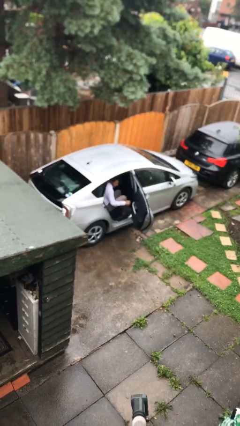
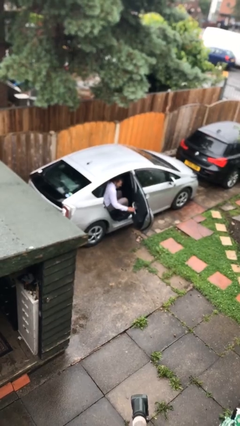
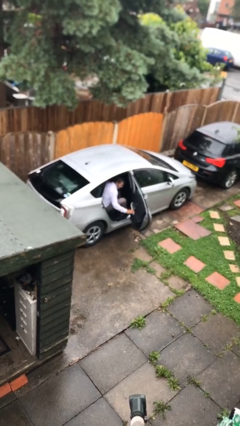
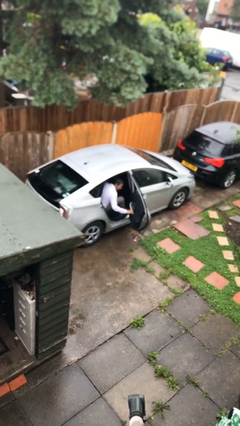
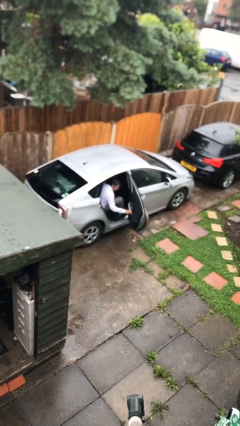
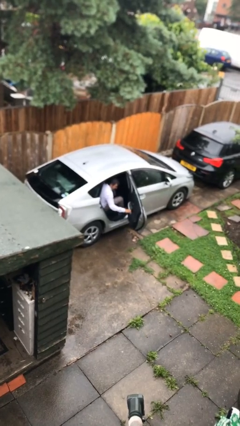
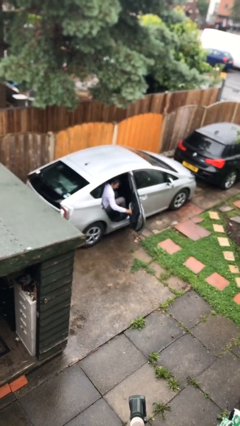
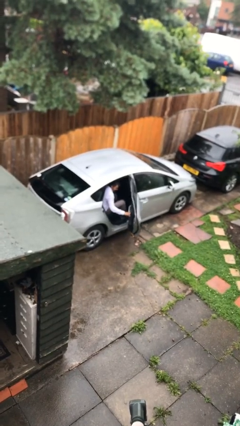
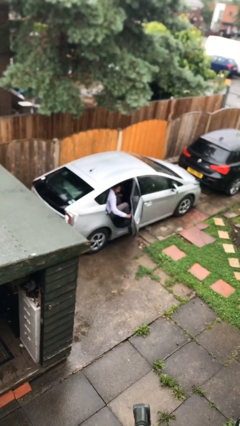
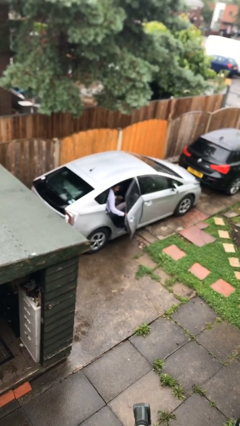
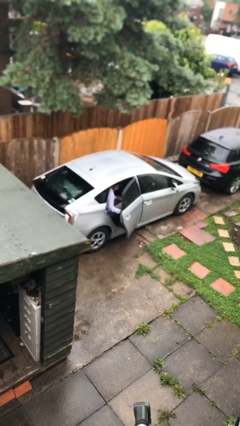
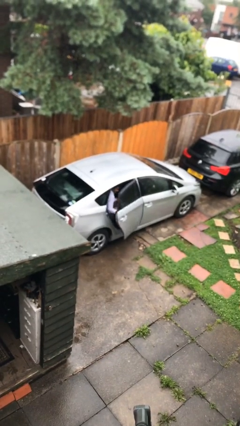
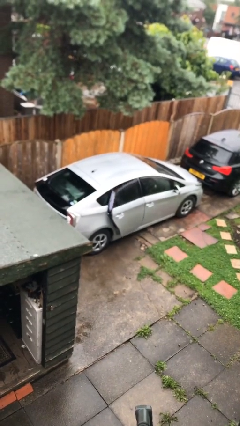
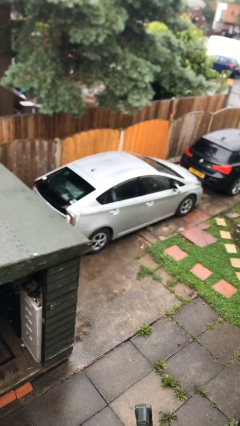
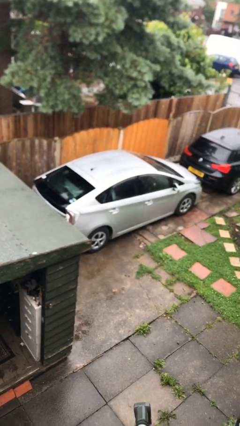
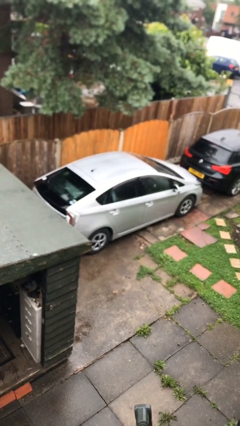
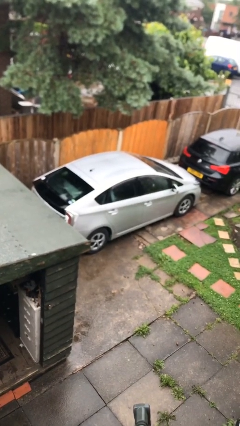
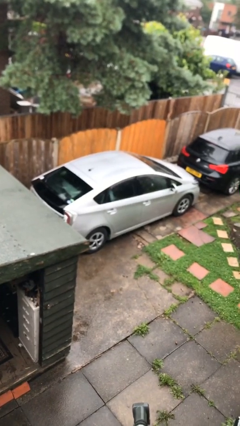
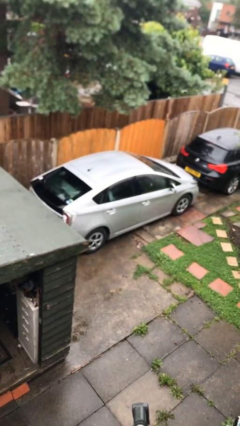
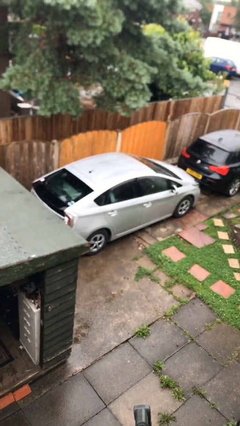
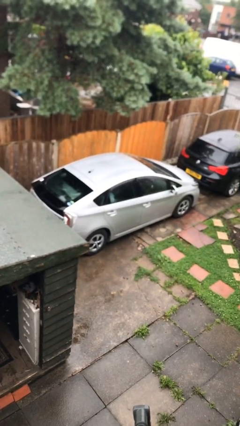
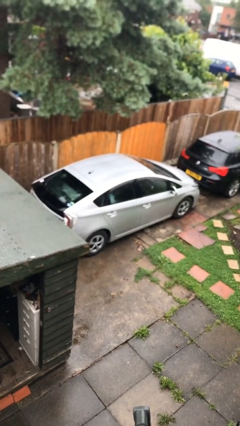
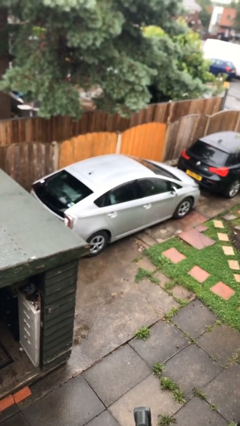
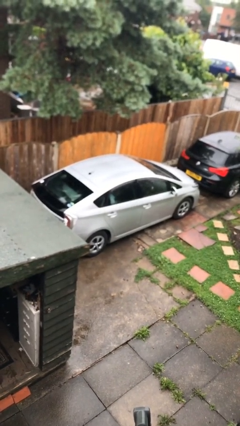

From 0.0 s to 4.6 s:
person closes car door

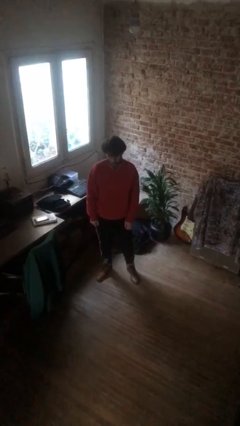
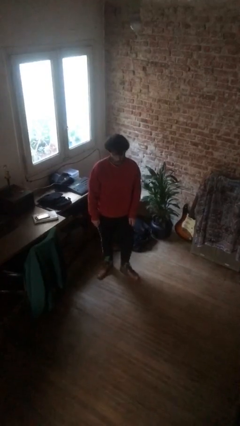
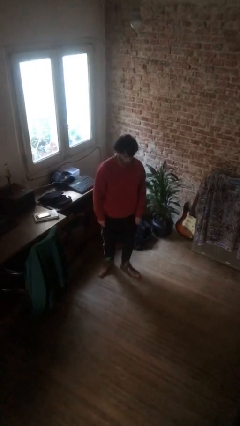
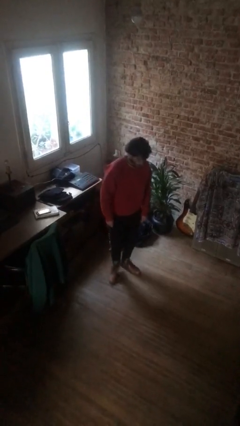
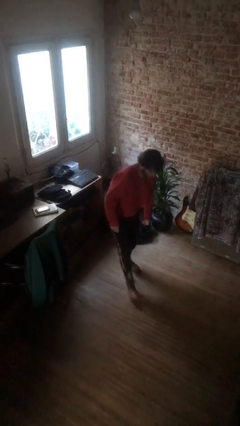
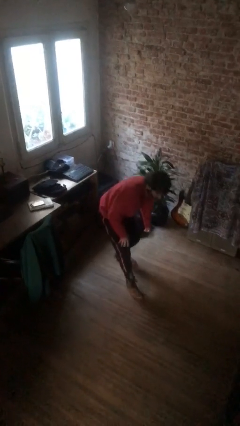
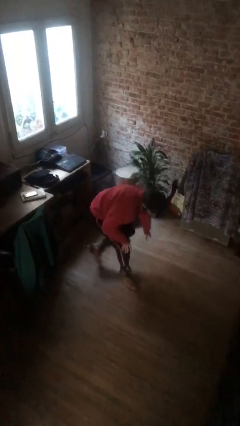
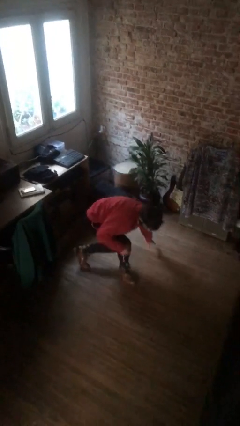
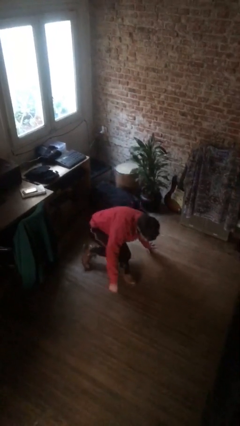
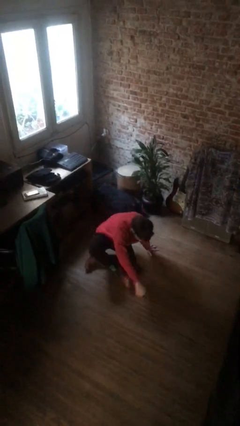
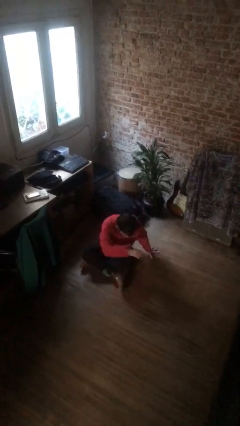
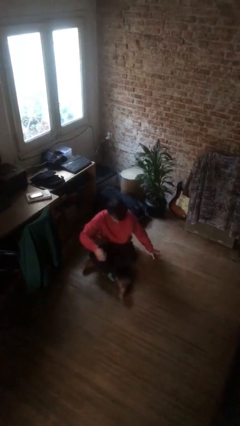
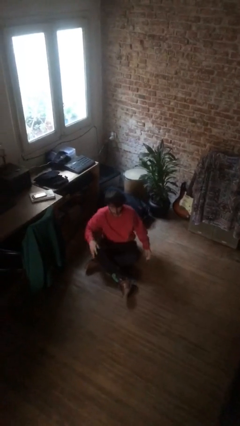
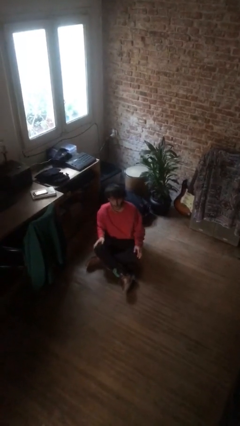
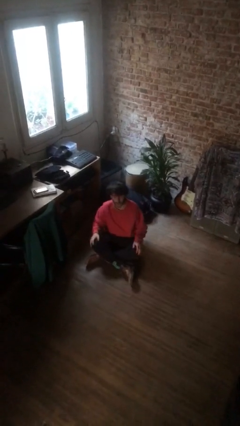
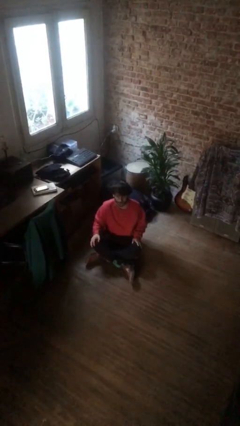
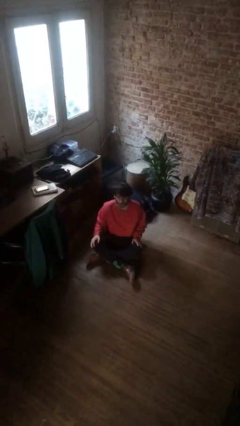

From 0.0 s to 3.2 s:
person sits crisscross

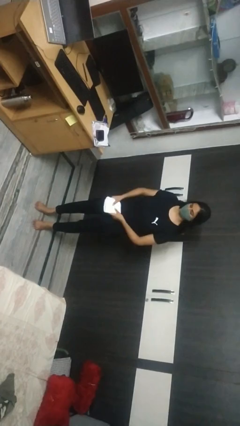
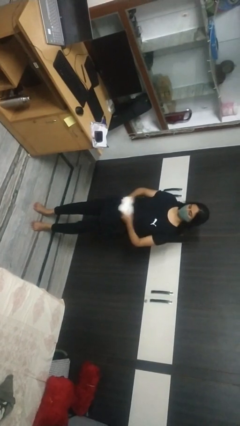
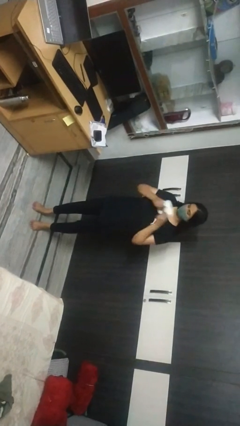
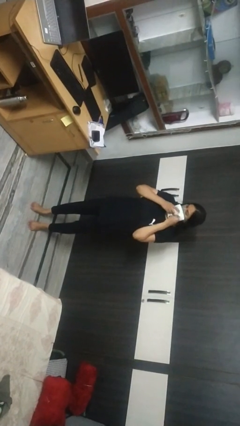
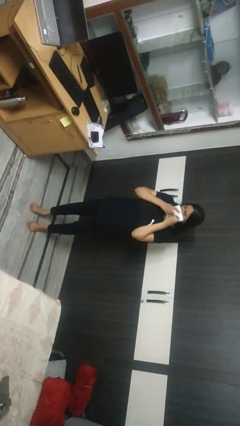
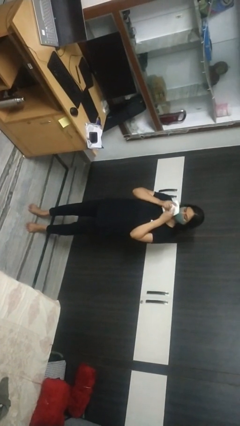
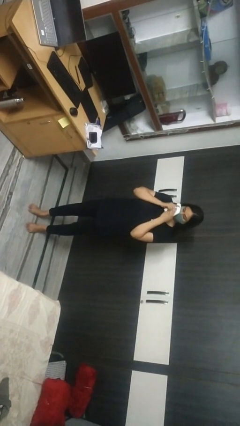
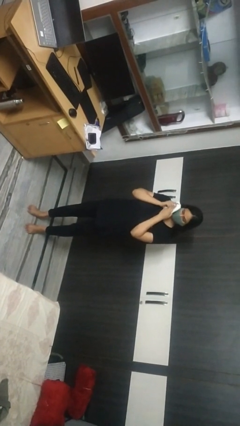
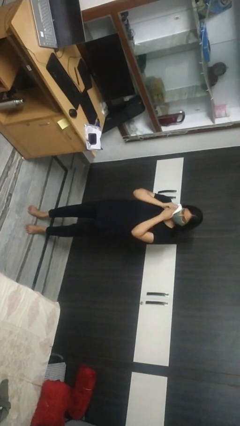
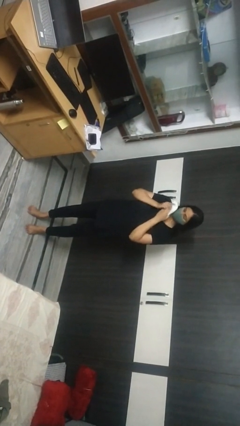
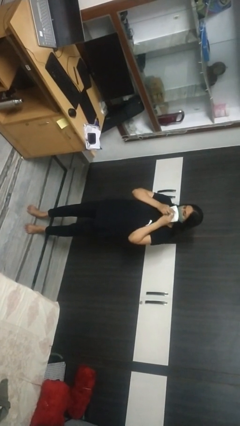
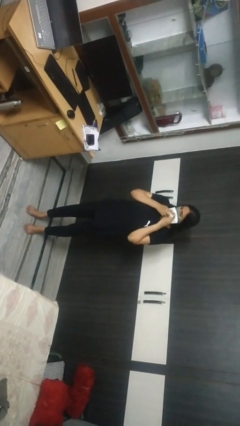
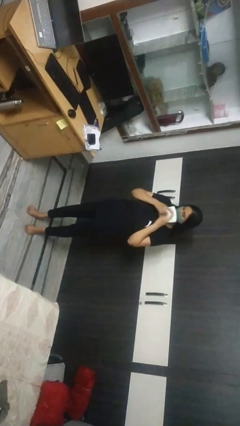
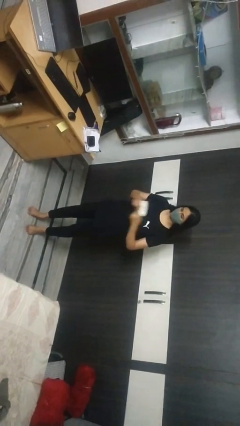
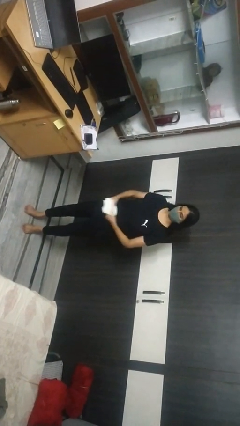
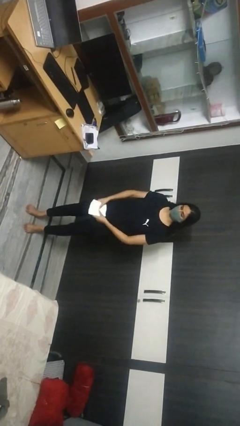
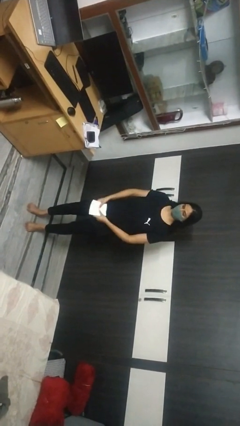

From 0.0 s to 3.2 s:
person wipes mouth with napkin

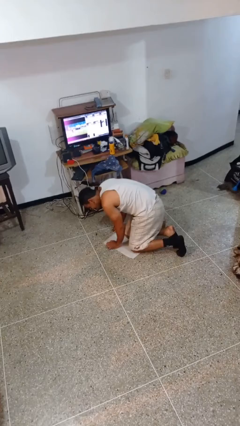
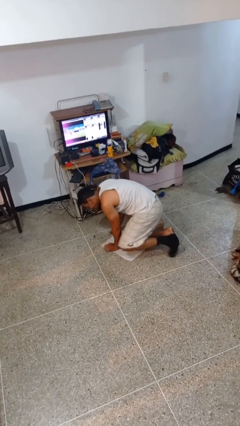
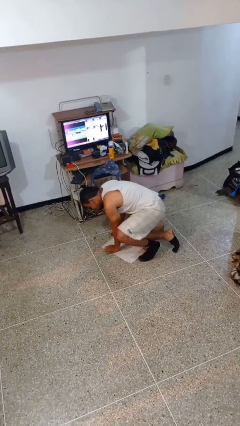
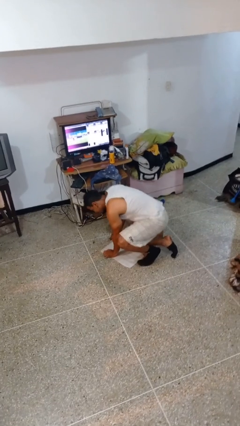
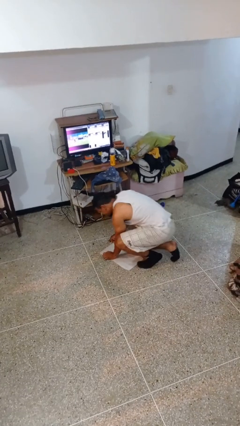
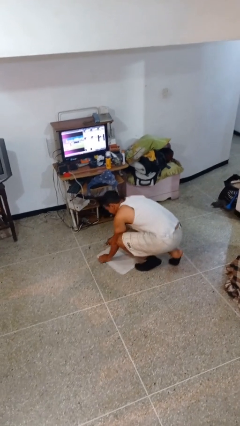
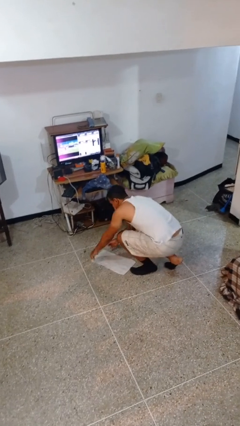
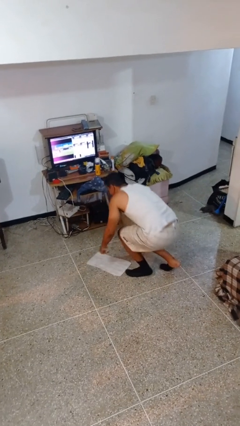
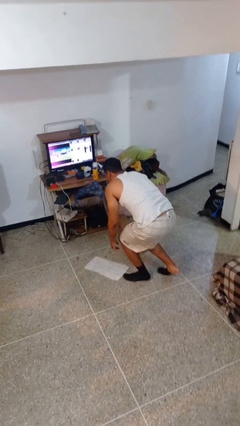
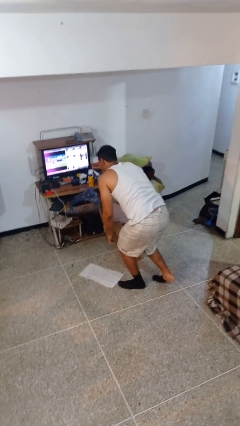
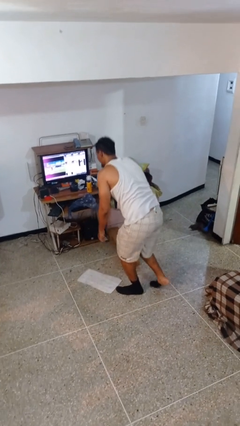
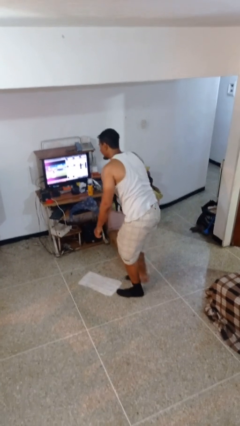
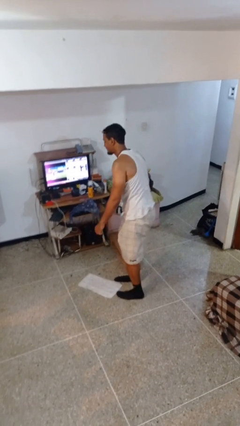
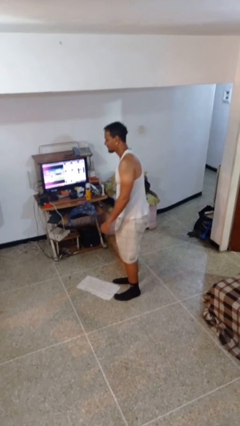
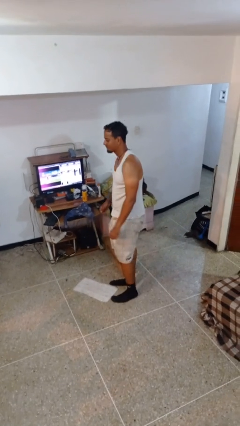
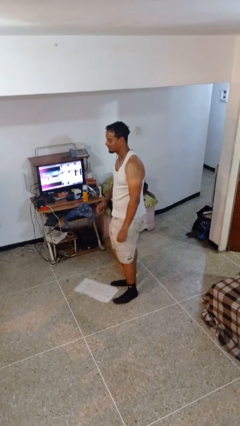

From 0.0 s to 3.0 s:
person stands up from floor

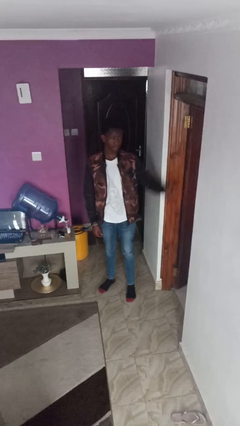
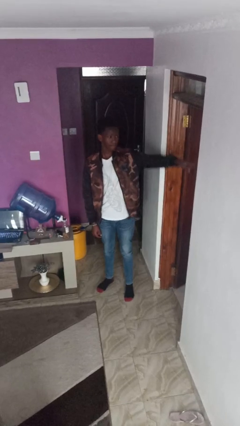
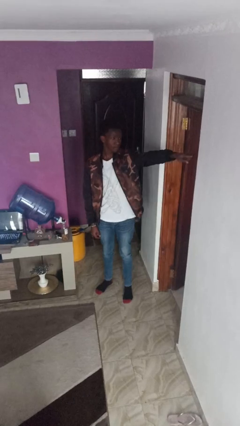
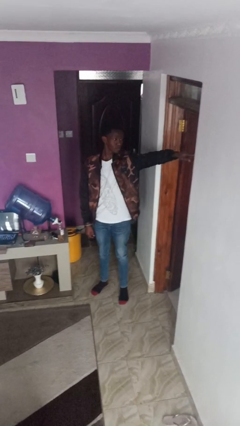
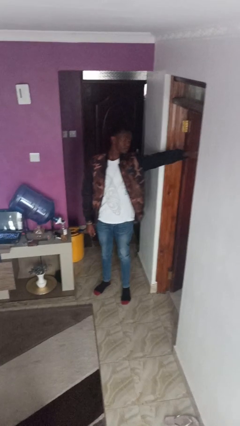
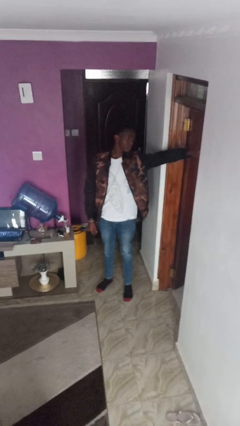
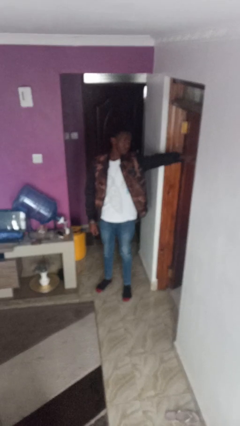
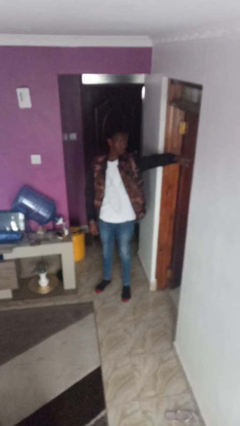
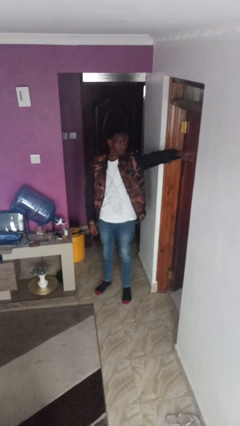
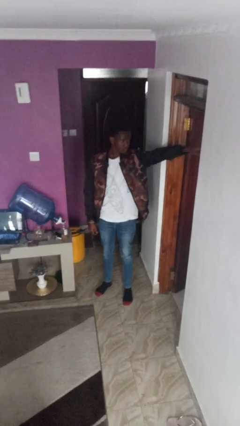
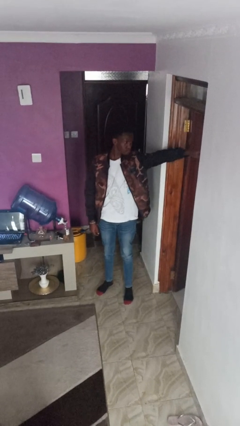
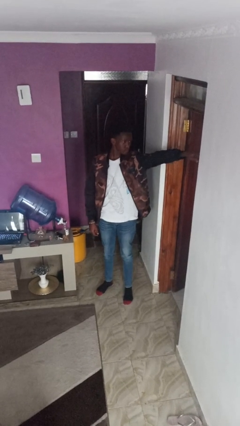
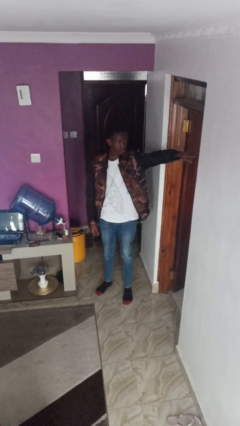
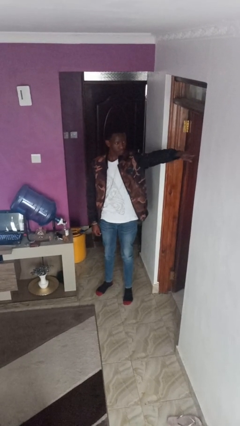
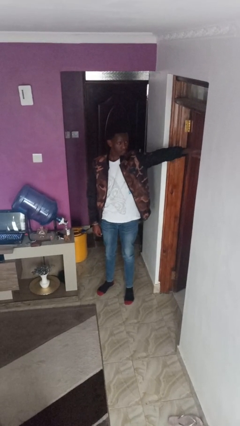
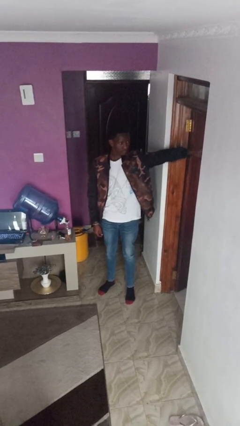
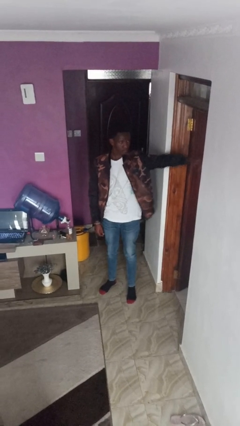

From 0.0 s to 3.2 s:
person points at person

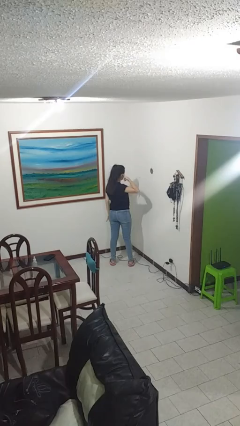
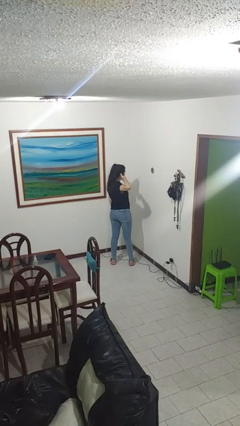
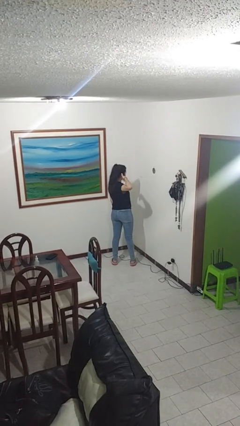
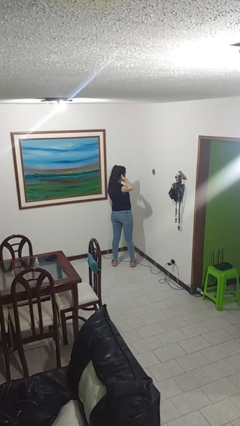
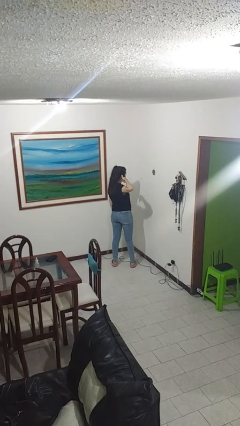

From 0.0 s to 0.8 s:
person gestures call me
